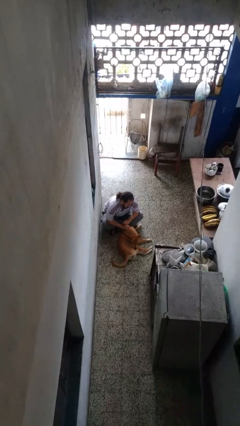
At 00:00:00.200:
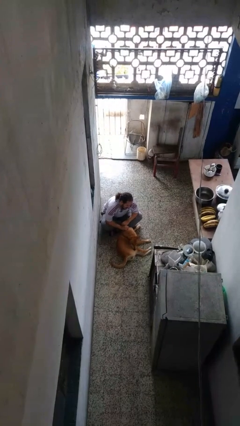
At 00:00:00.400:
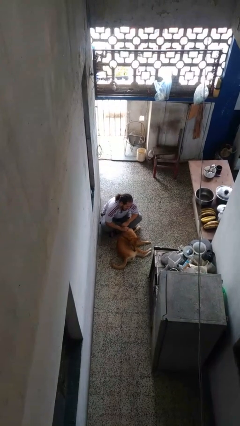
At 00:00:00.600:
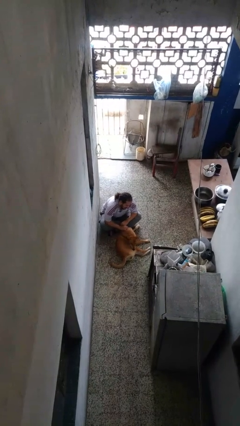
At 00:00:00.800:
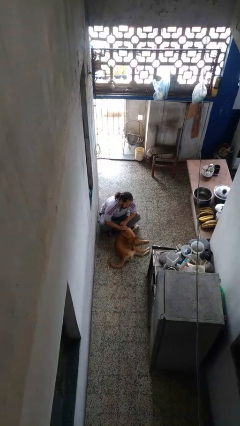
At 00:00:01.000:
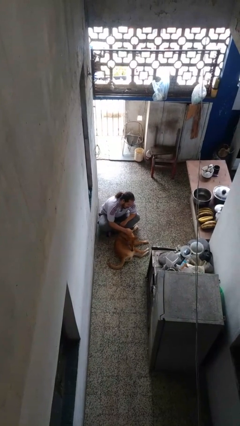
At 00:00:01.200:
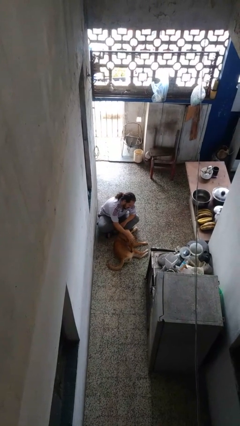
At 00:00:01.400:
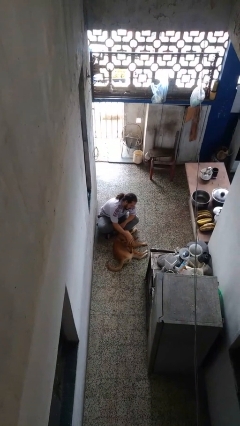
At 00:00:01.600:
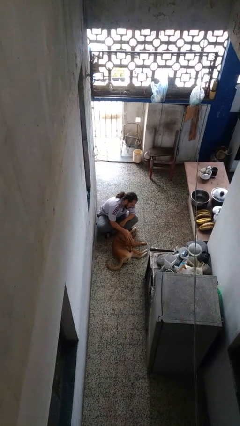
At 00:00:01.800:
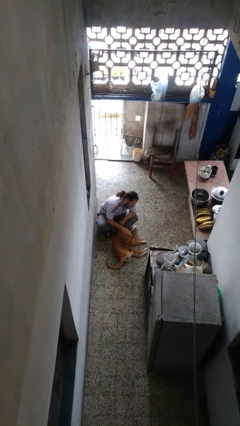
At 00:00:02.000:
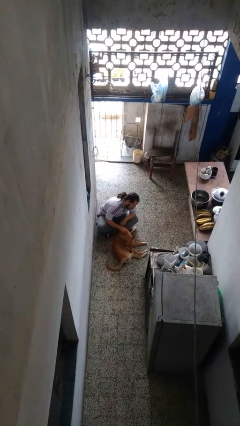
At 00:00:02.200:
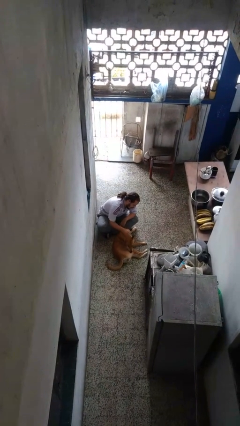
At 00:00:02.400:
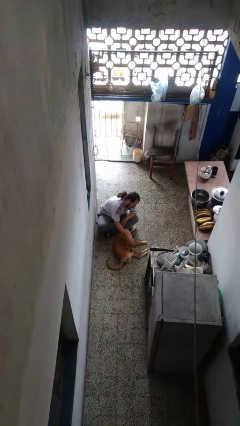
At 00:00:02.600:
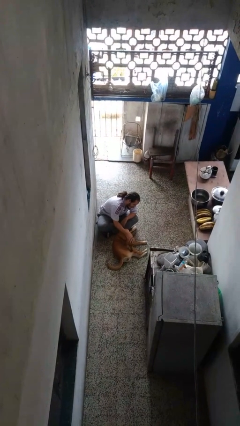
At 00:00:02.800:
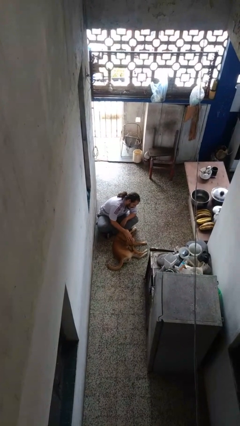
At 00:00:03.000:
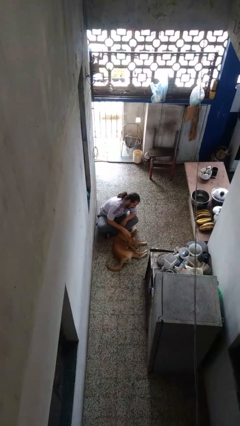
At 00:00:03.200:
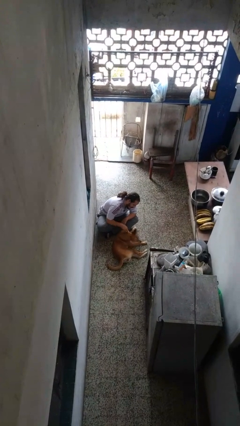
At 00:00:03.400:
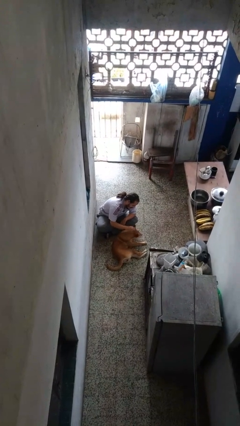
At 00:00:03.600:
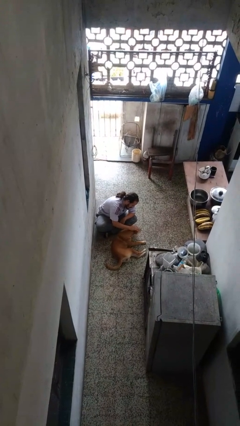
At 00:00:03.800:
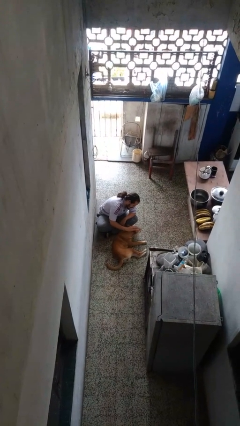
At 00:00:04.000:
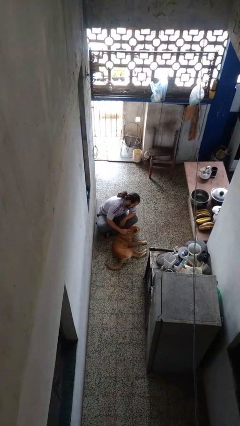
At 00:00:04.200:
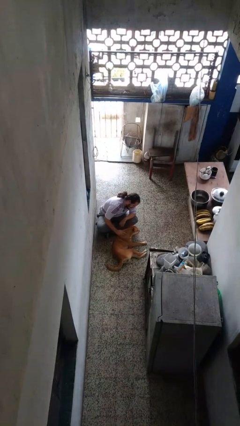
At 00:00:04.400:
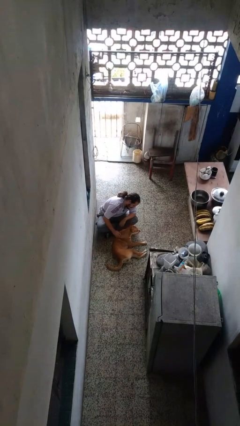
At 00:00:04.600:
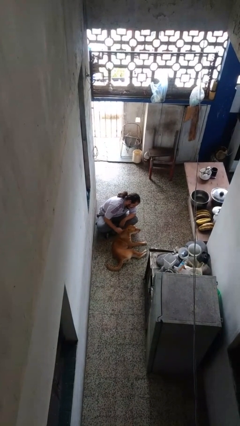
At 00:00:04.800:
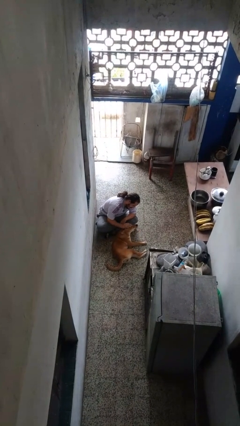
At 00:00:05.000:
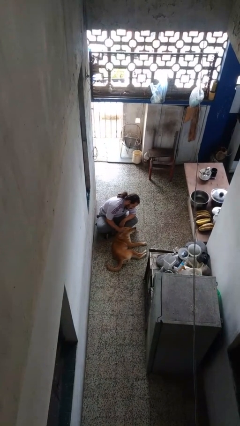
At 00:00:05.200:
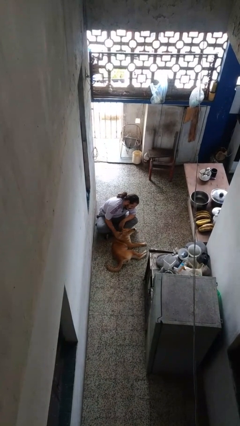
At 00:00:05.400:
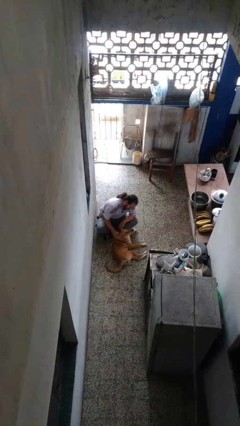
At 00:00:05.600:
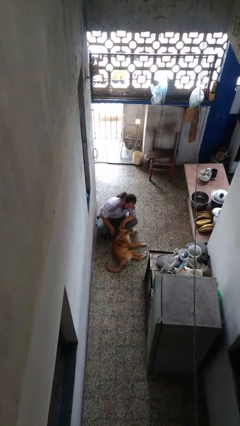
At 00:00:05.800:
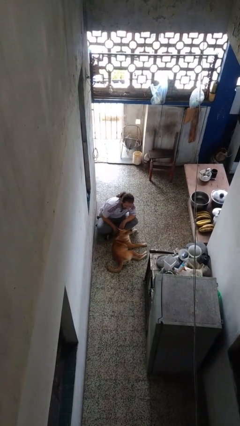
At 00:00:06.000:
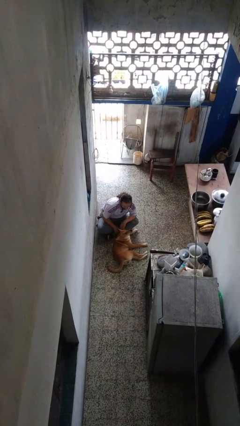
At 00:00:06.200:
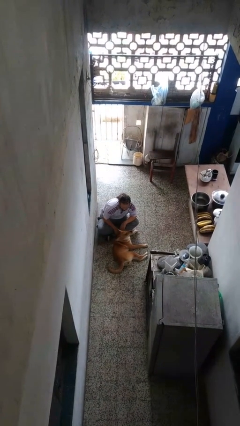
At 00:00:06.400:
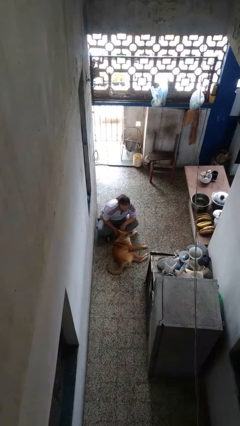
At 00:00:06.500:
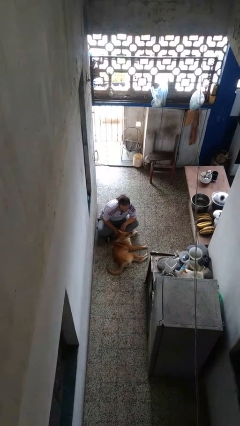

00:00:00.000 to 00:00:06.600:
person pets dog

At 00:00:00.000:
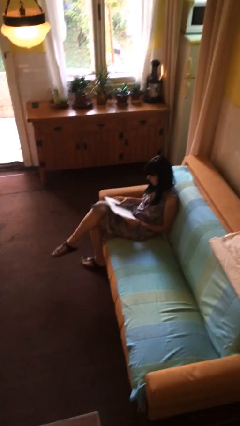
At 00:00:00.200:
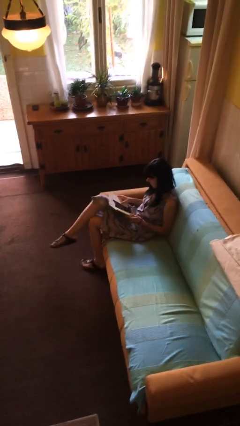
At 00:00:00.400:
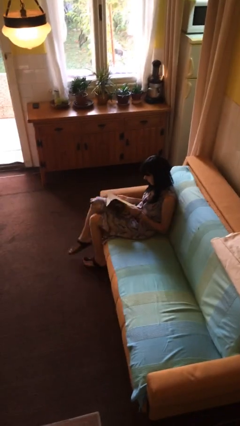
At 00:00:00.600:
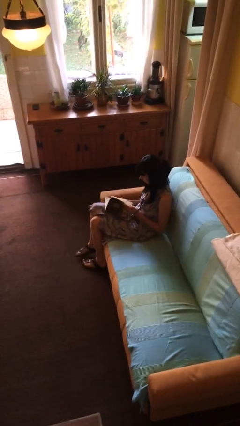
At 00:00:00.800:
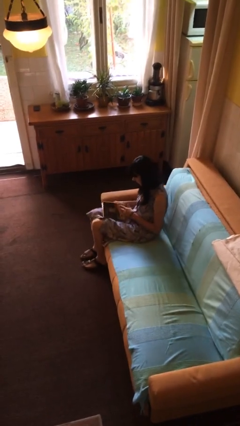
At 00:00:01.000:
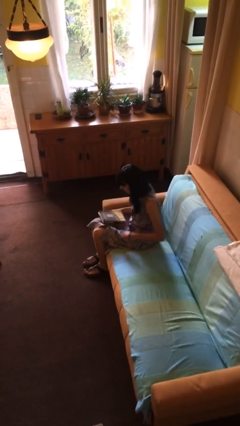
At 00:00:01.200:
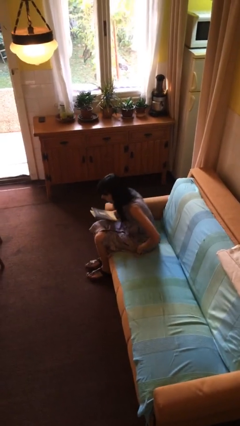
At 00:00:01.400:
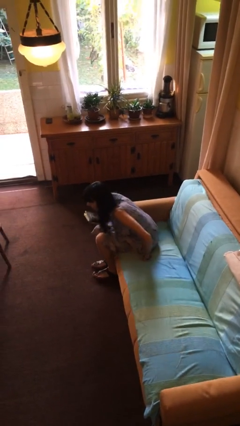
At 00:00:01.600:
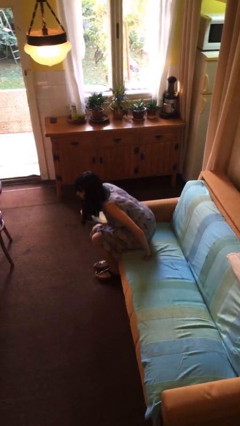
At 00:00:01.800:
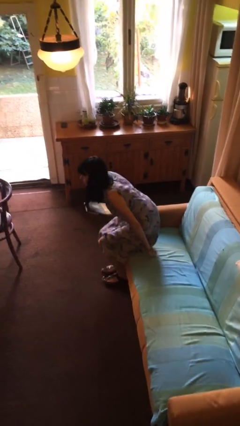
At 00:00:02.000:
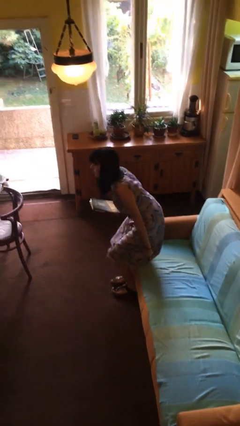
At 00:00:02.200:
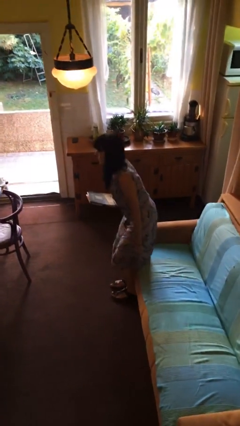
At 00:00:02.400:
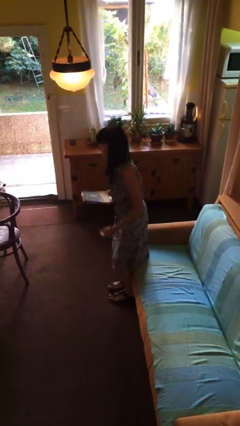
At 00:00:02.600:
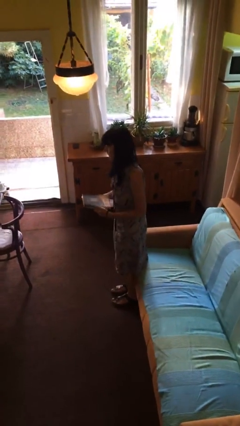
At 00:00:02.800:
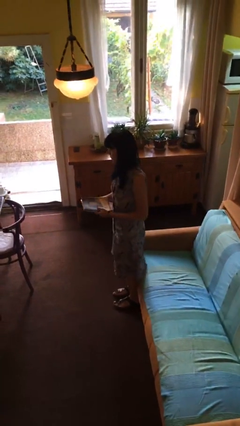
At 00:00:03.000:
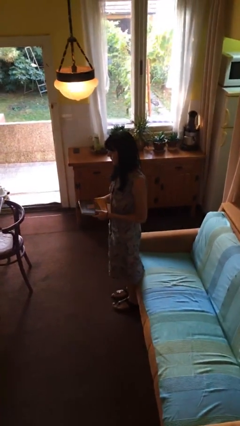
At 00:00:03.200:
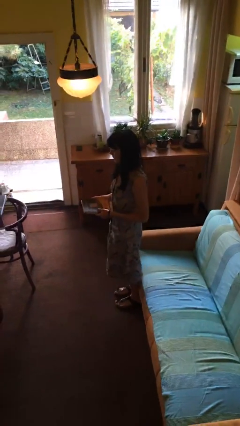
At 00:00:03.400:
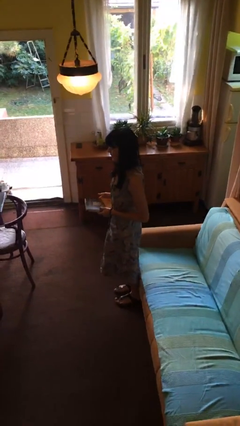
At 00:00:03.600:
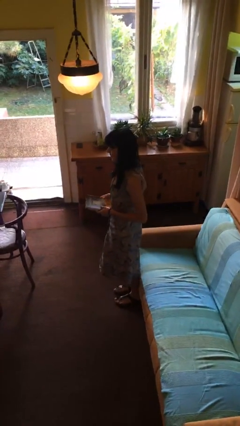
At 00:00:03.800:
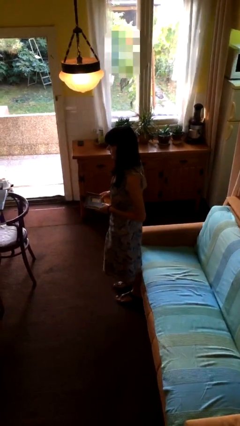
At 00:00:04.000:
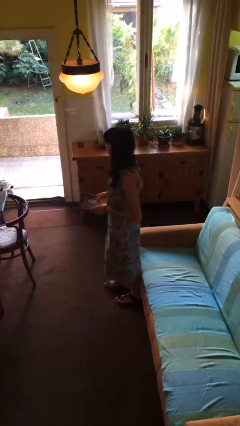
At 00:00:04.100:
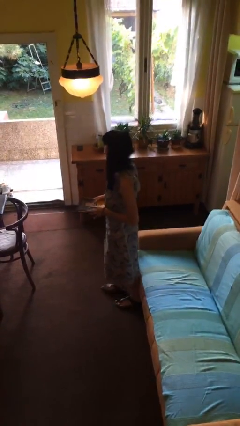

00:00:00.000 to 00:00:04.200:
person stands up

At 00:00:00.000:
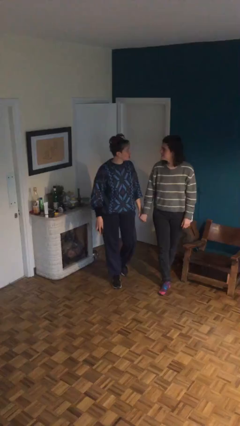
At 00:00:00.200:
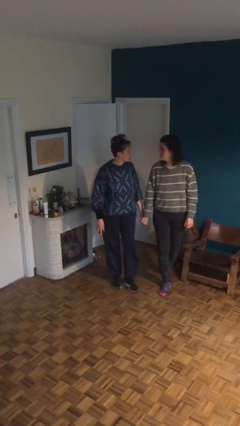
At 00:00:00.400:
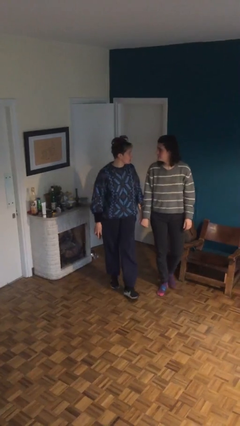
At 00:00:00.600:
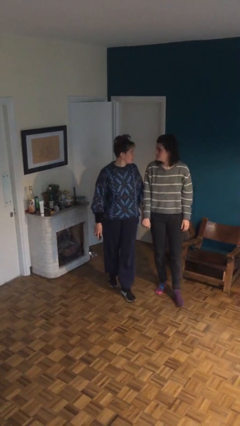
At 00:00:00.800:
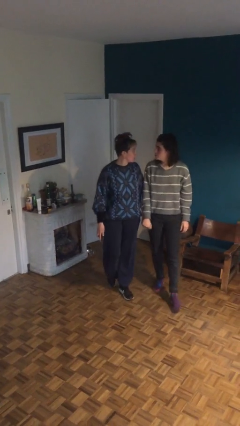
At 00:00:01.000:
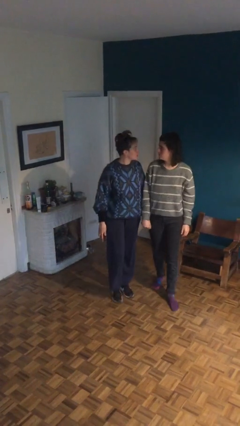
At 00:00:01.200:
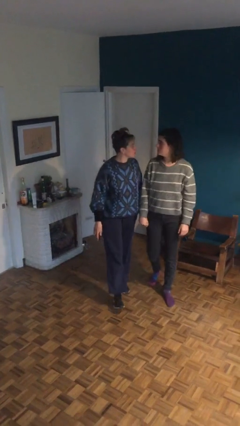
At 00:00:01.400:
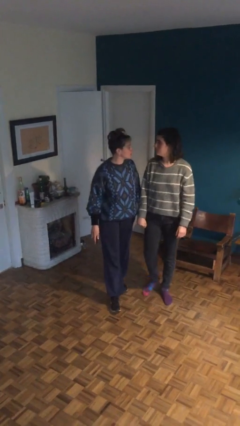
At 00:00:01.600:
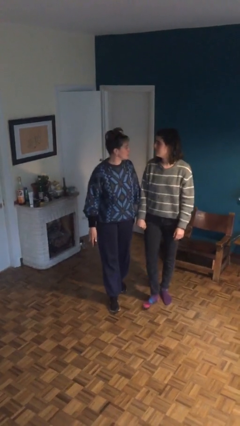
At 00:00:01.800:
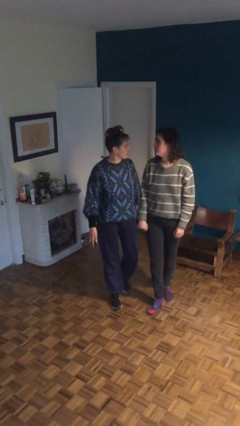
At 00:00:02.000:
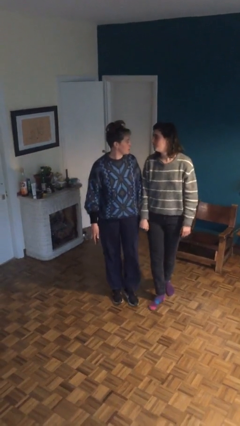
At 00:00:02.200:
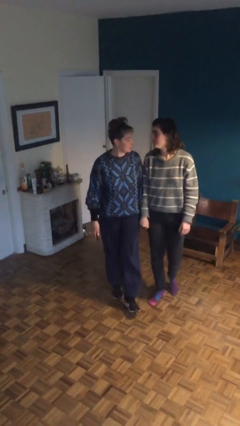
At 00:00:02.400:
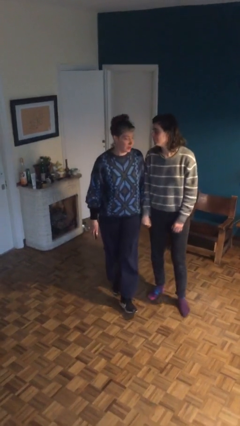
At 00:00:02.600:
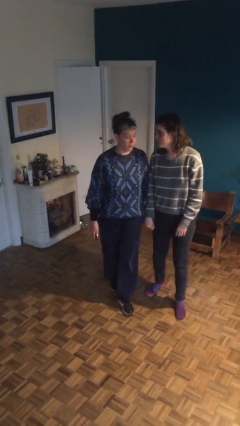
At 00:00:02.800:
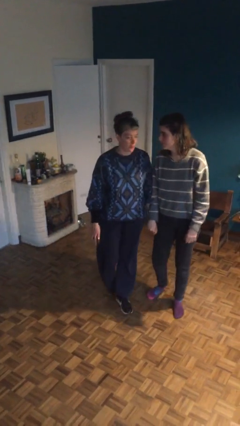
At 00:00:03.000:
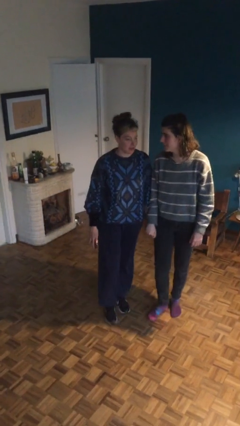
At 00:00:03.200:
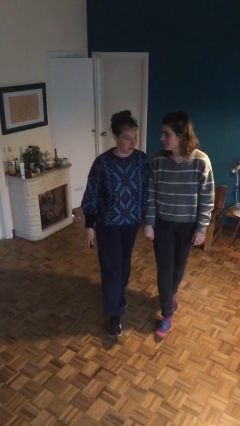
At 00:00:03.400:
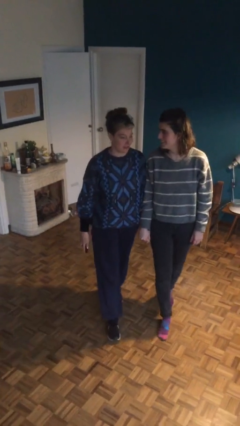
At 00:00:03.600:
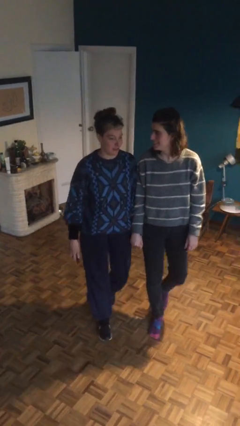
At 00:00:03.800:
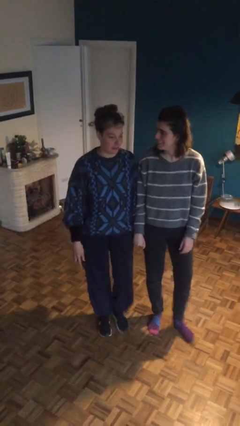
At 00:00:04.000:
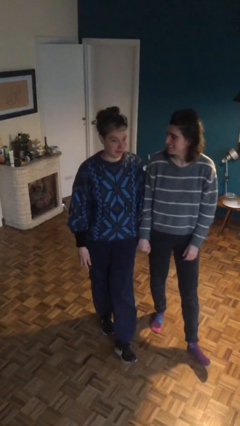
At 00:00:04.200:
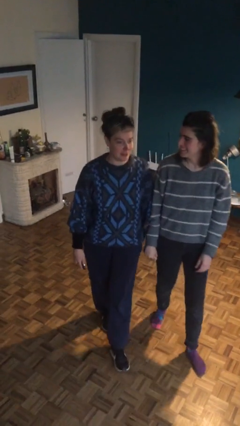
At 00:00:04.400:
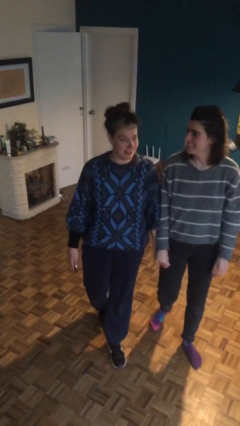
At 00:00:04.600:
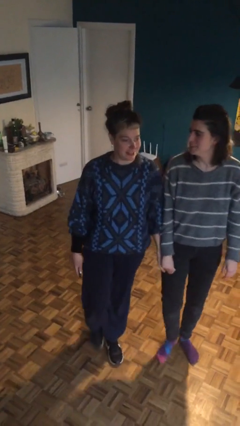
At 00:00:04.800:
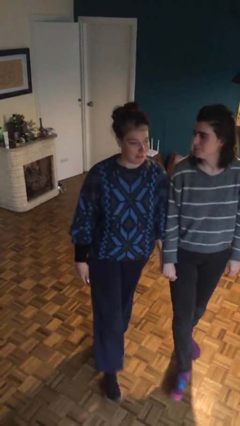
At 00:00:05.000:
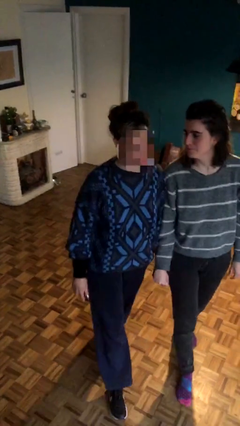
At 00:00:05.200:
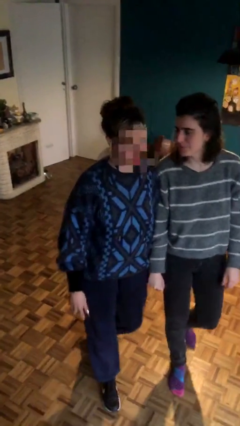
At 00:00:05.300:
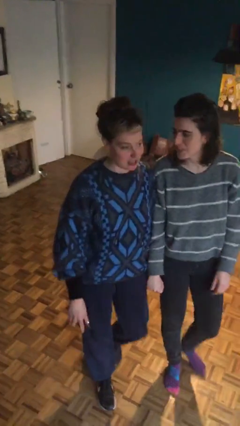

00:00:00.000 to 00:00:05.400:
person holds hand

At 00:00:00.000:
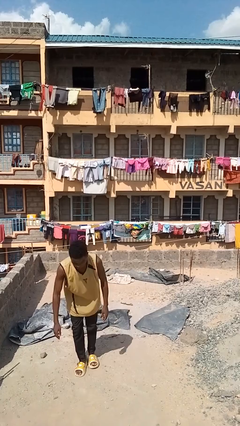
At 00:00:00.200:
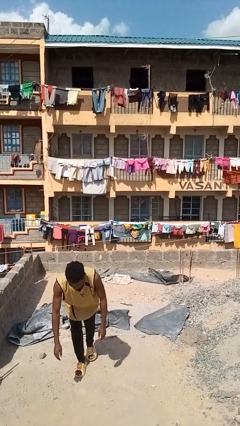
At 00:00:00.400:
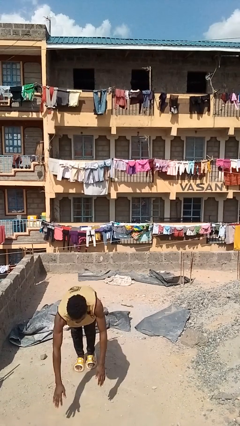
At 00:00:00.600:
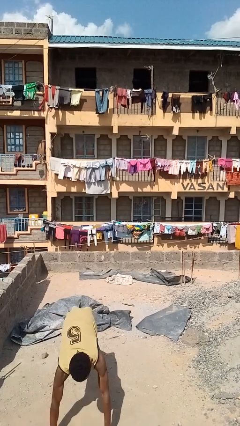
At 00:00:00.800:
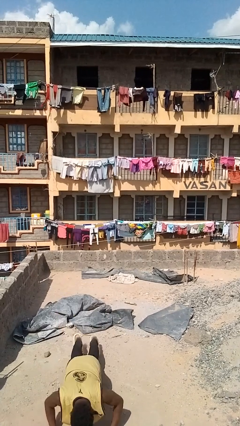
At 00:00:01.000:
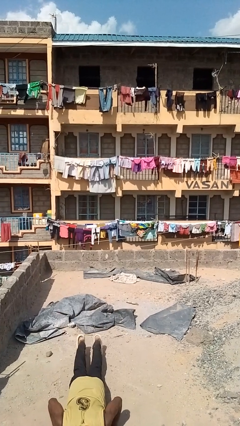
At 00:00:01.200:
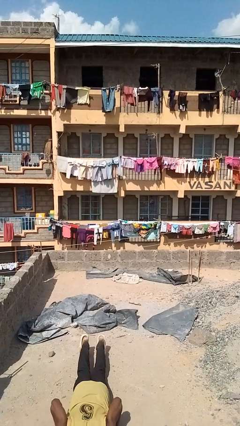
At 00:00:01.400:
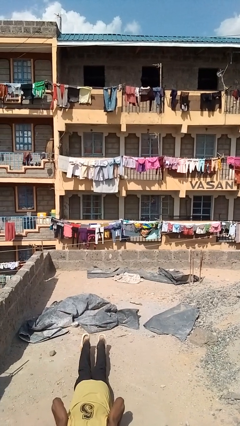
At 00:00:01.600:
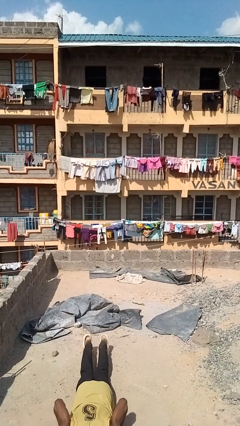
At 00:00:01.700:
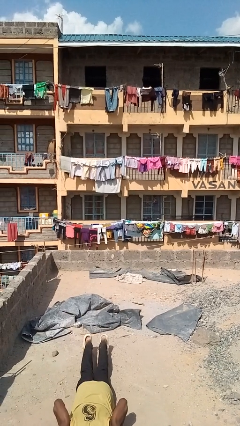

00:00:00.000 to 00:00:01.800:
person falls while standing
